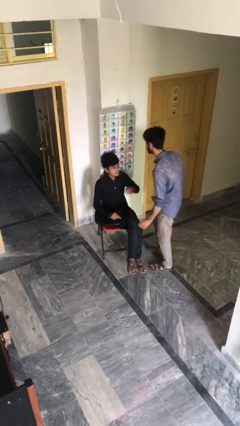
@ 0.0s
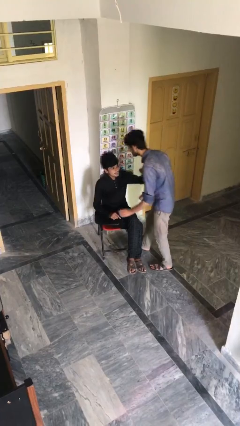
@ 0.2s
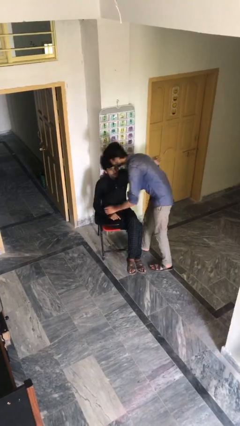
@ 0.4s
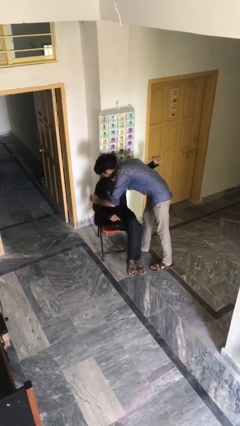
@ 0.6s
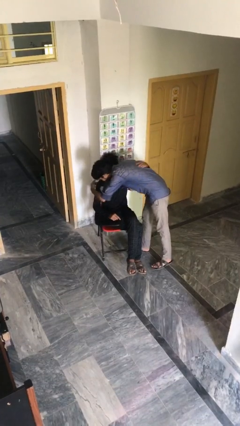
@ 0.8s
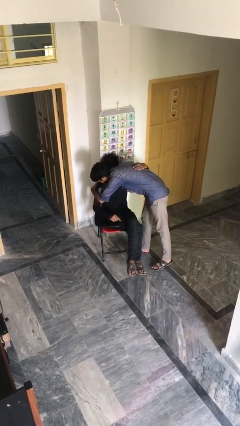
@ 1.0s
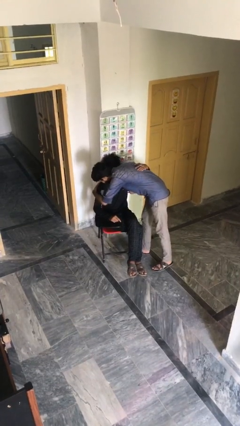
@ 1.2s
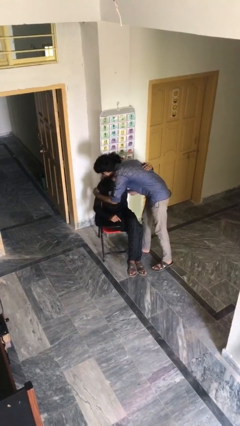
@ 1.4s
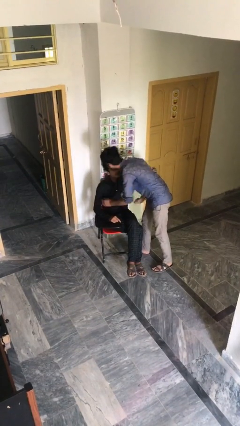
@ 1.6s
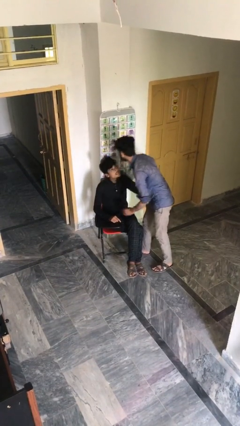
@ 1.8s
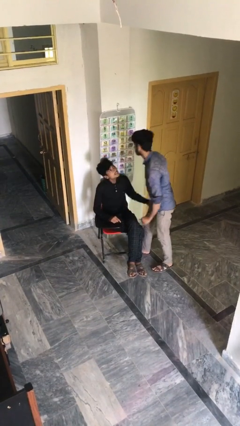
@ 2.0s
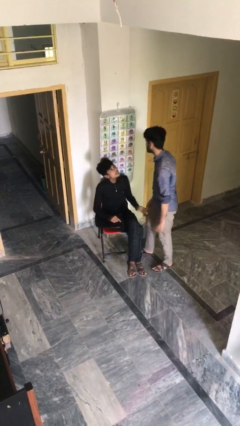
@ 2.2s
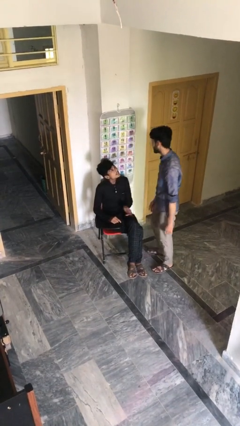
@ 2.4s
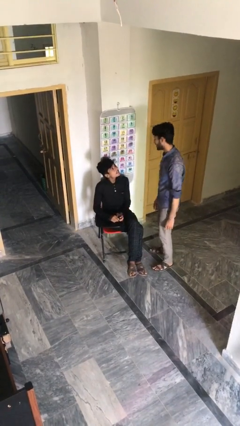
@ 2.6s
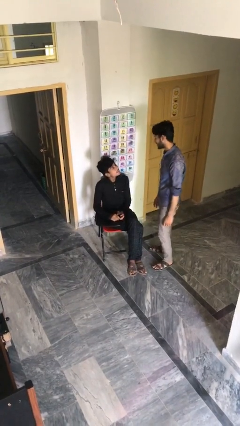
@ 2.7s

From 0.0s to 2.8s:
person embraces person

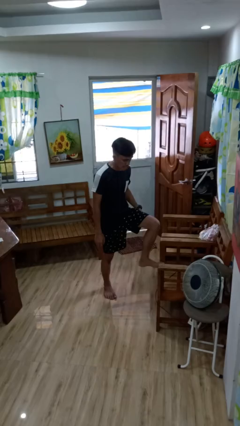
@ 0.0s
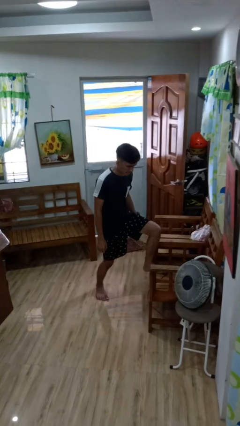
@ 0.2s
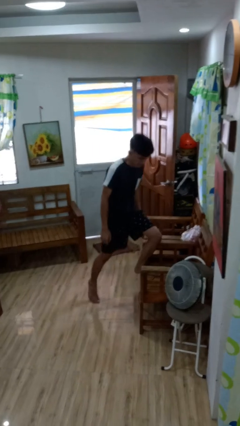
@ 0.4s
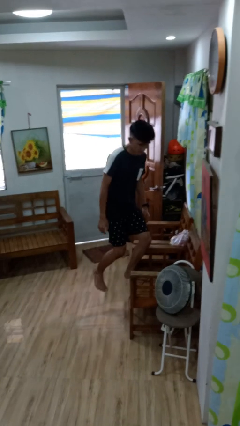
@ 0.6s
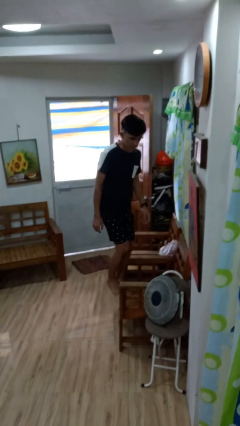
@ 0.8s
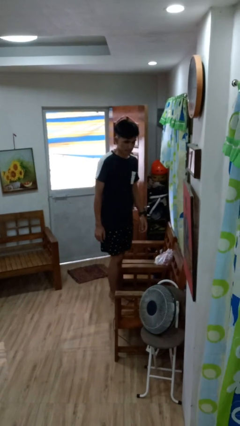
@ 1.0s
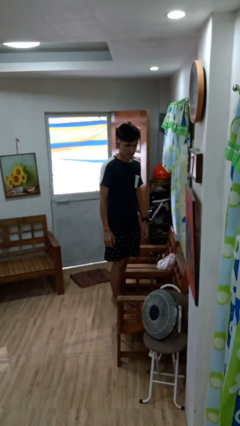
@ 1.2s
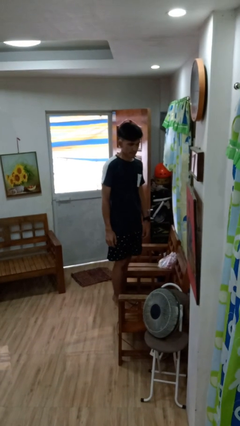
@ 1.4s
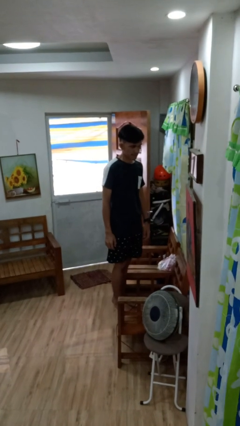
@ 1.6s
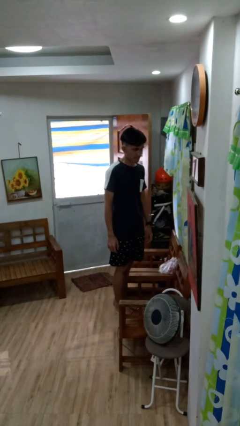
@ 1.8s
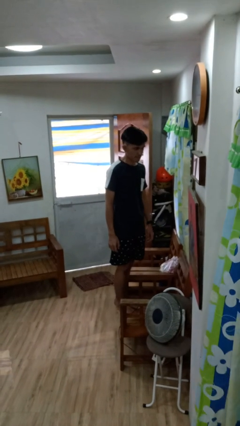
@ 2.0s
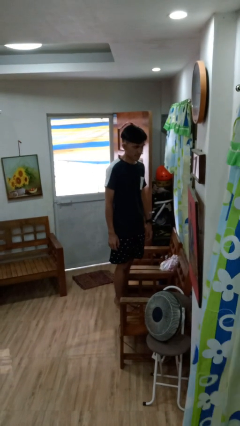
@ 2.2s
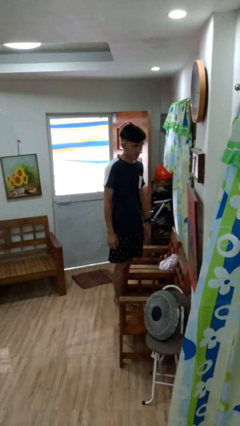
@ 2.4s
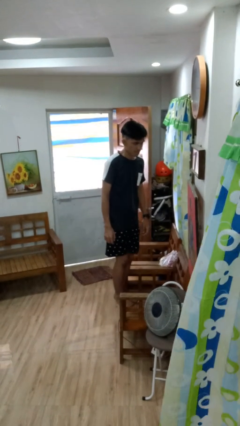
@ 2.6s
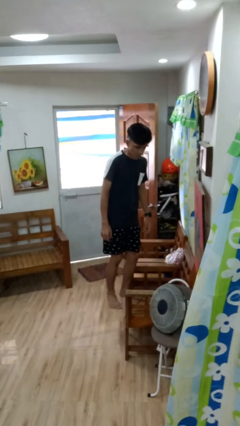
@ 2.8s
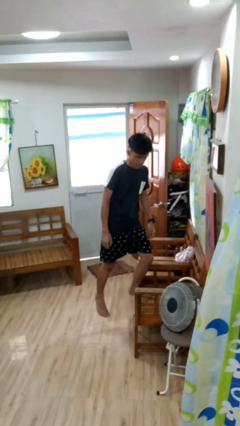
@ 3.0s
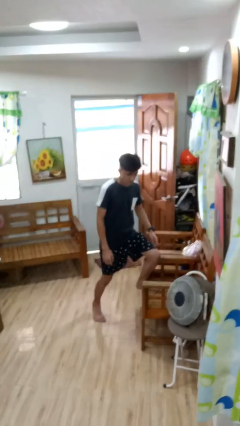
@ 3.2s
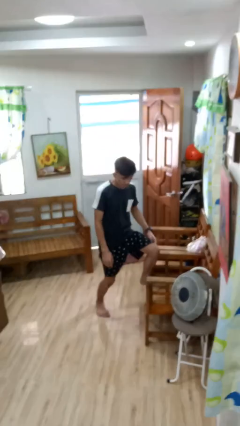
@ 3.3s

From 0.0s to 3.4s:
person climbs on chair

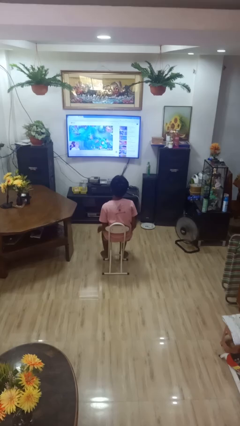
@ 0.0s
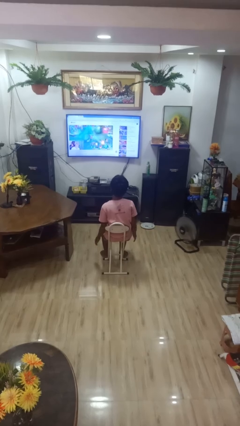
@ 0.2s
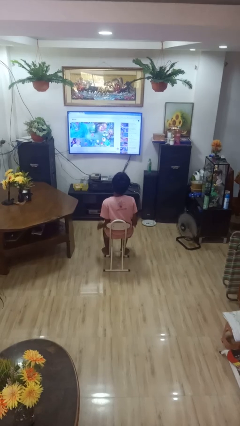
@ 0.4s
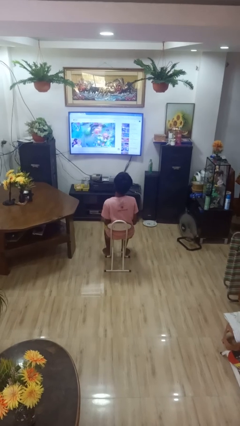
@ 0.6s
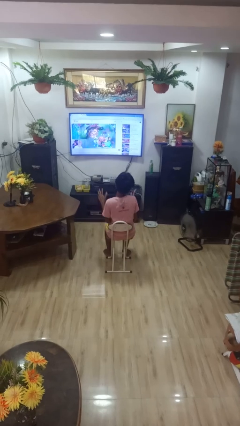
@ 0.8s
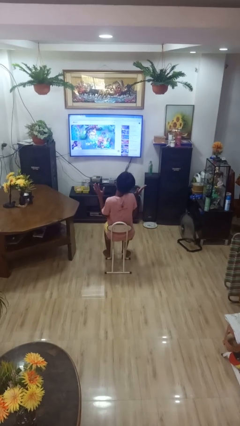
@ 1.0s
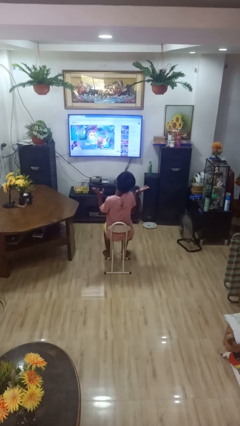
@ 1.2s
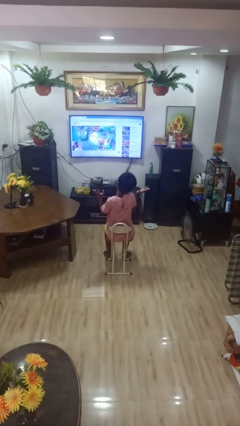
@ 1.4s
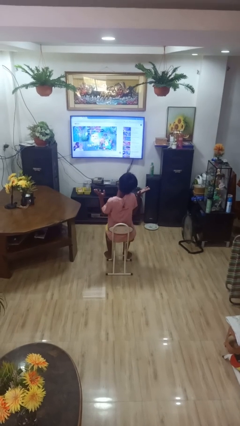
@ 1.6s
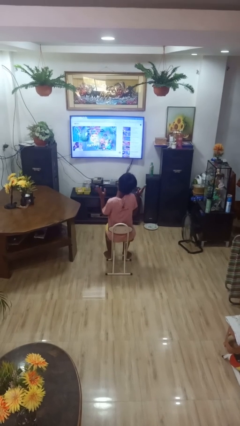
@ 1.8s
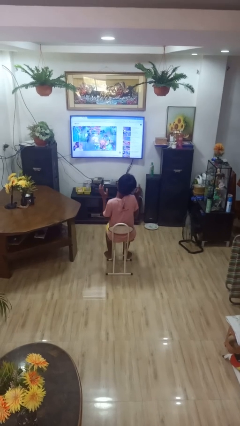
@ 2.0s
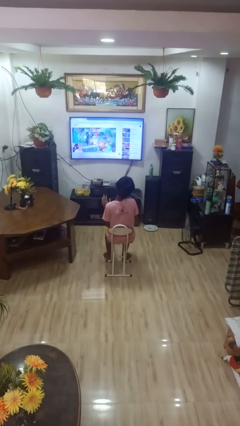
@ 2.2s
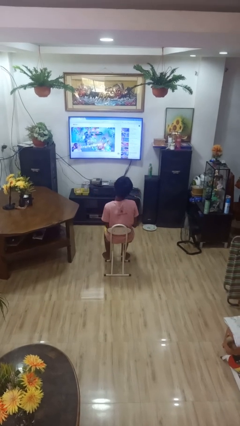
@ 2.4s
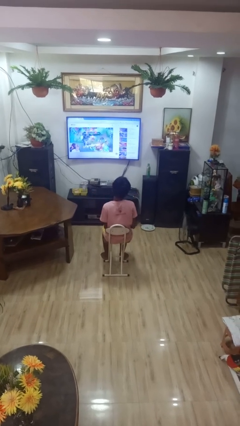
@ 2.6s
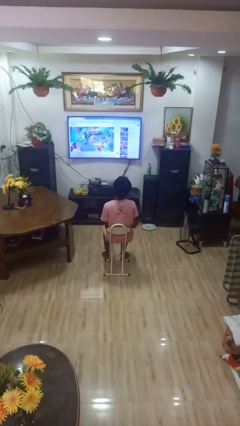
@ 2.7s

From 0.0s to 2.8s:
person shrugs

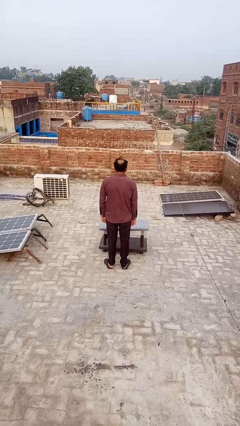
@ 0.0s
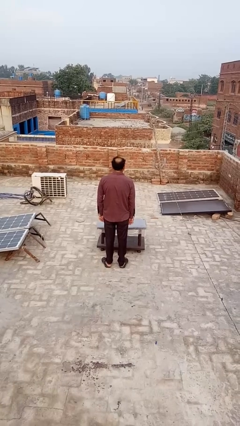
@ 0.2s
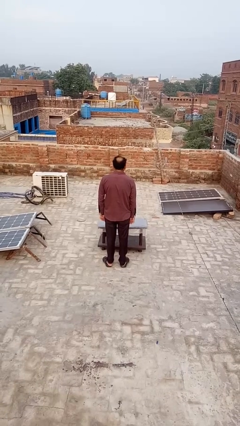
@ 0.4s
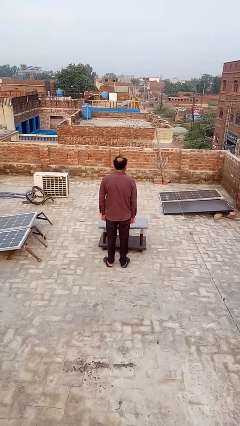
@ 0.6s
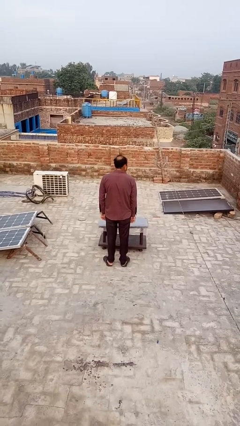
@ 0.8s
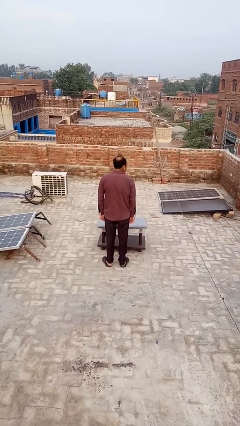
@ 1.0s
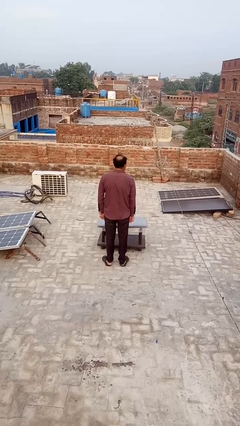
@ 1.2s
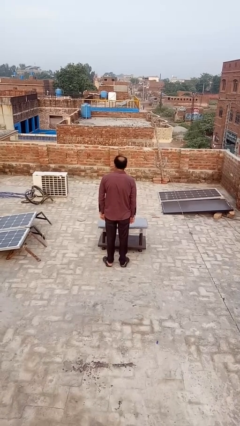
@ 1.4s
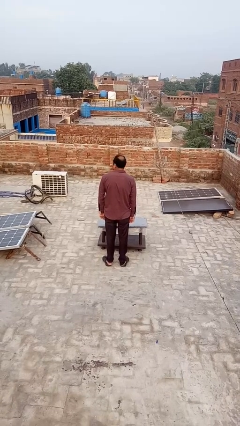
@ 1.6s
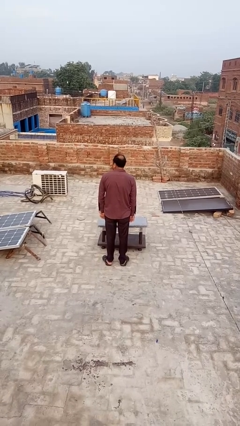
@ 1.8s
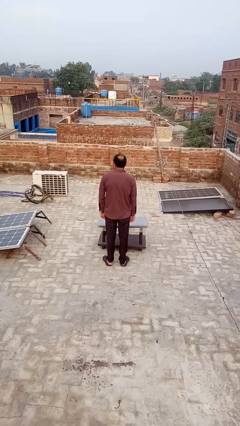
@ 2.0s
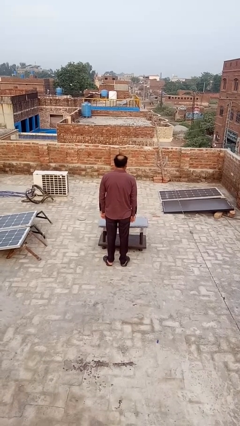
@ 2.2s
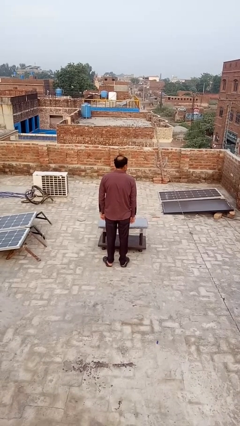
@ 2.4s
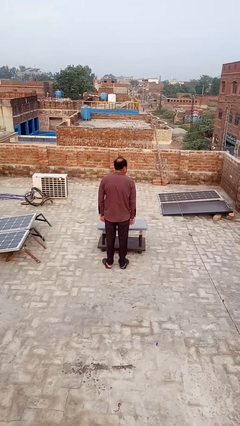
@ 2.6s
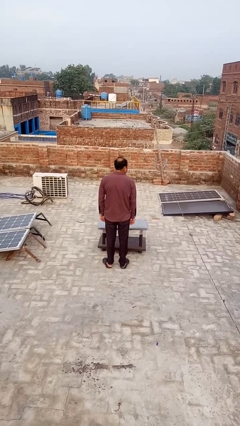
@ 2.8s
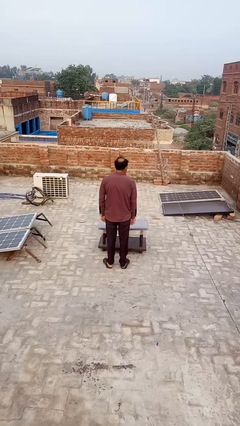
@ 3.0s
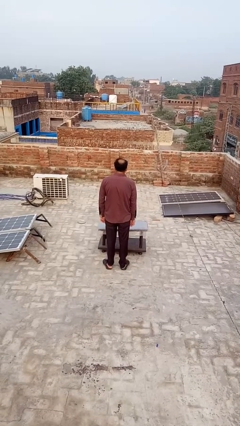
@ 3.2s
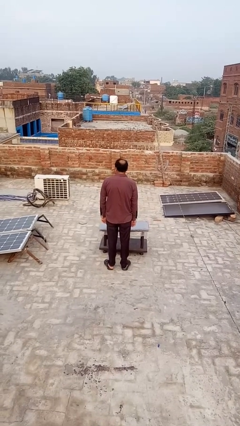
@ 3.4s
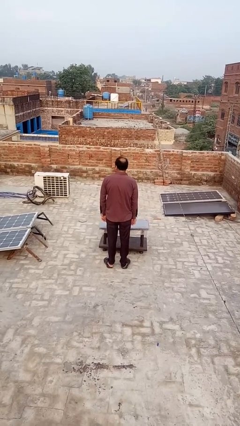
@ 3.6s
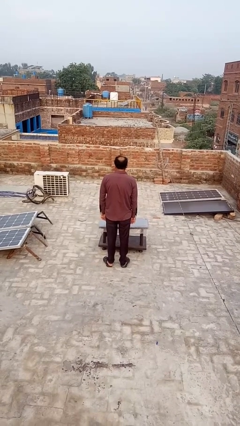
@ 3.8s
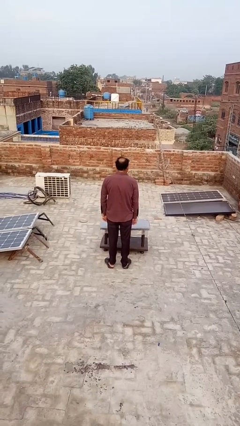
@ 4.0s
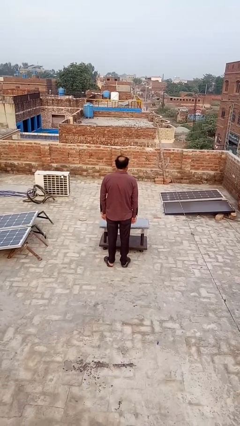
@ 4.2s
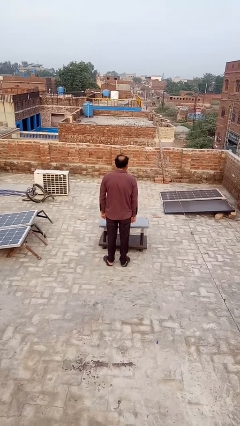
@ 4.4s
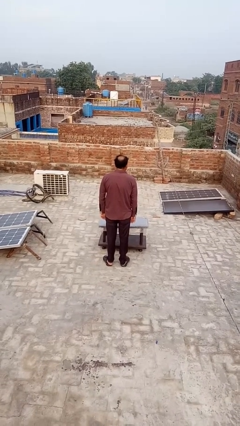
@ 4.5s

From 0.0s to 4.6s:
person shakes head

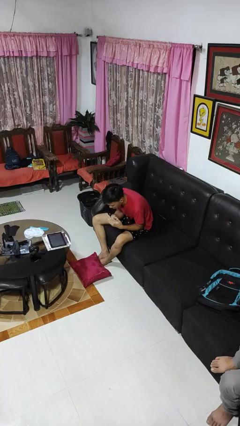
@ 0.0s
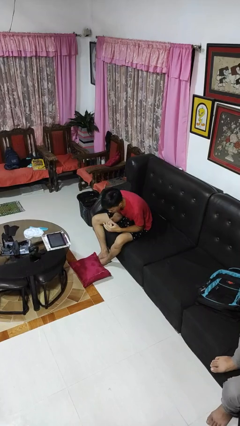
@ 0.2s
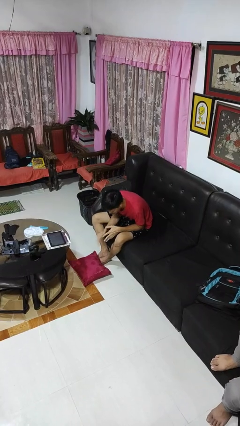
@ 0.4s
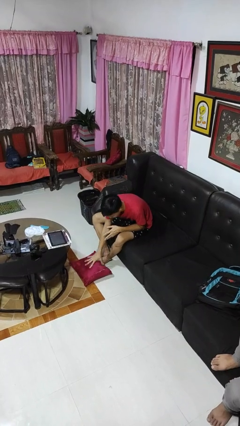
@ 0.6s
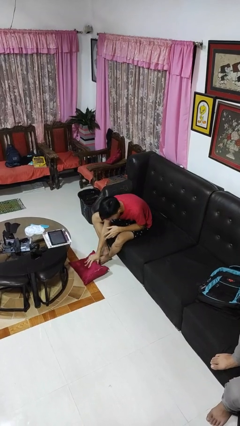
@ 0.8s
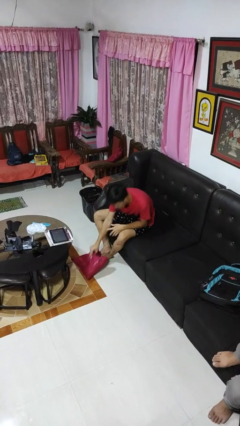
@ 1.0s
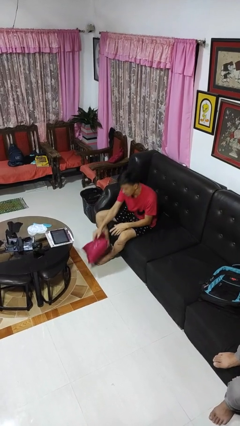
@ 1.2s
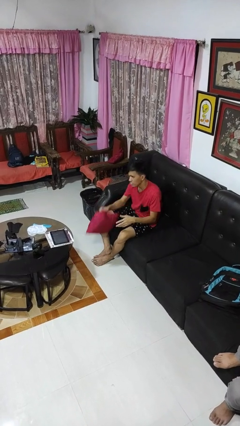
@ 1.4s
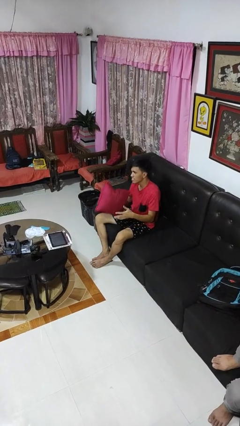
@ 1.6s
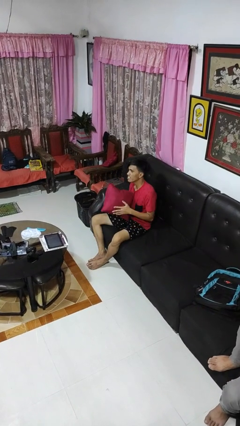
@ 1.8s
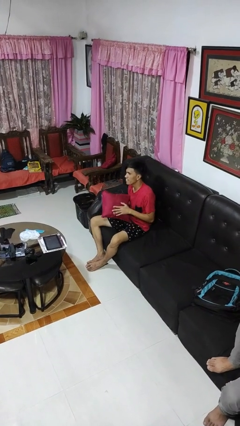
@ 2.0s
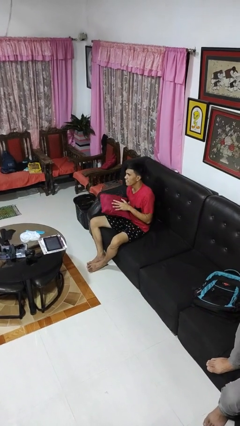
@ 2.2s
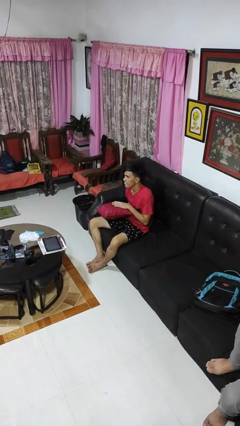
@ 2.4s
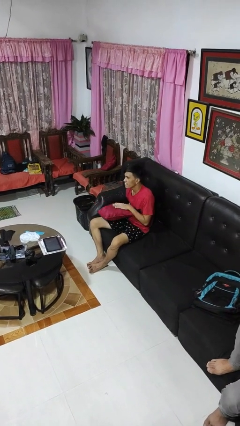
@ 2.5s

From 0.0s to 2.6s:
person picks up object from floor

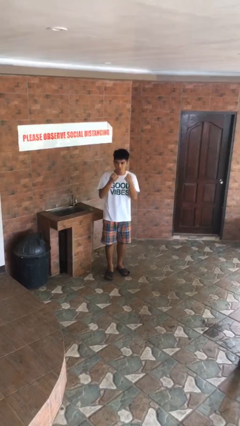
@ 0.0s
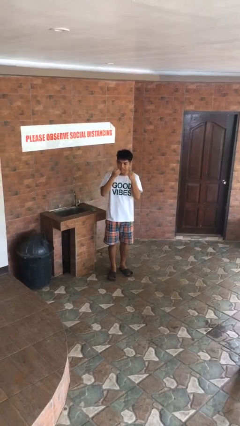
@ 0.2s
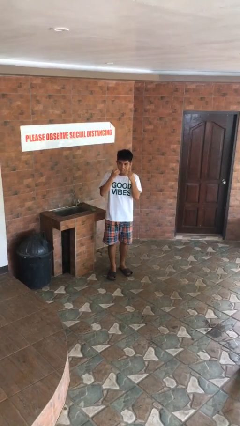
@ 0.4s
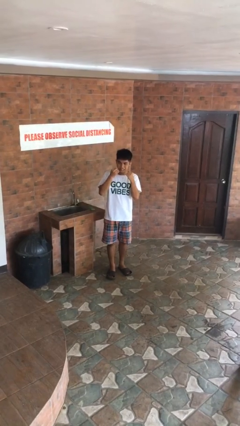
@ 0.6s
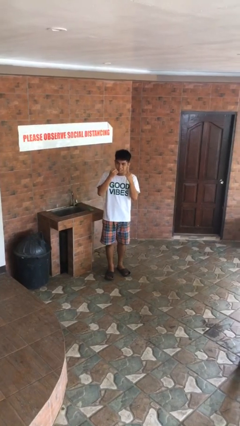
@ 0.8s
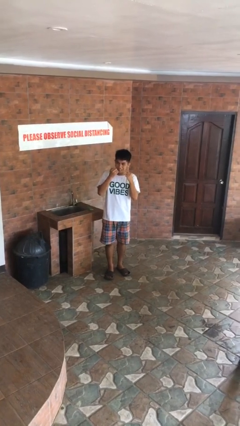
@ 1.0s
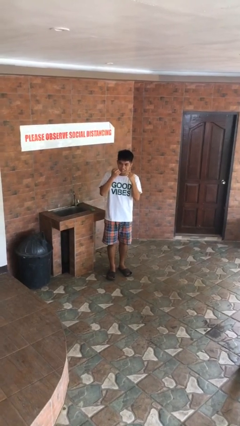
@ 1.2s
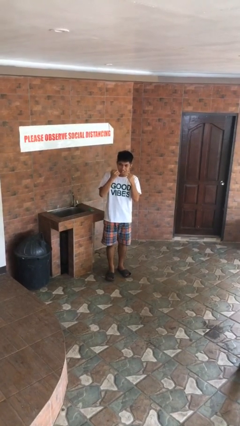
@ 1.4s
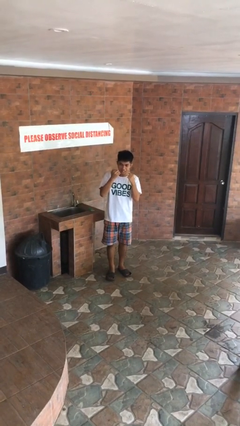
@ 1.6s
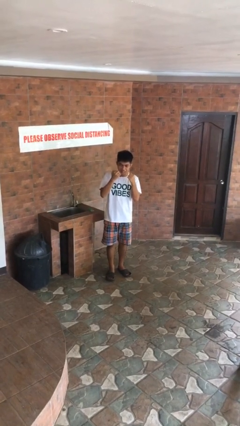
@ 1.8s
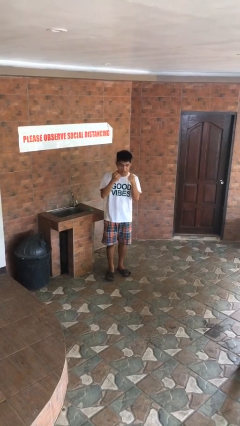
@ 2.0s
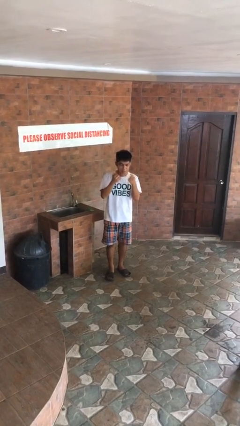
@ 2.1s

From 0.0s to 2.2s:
person flosses
